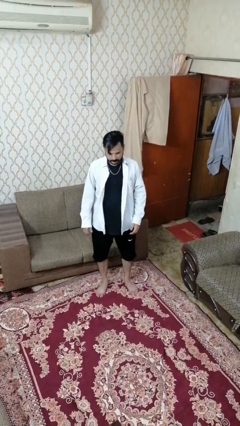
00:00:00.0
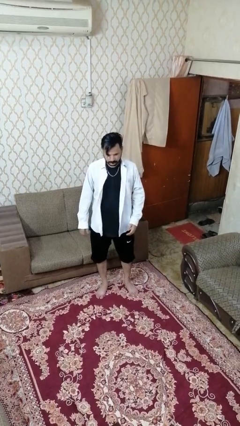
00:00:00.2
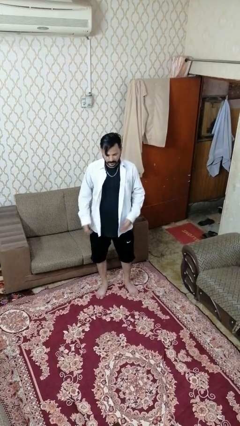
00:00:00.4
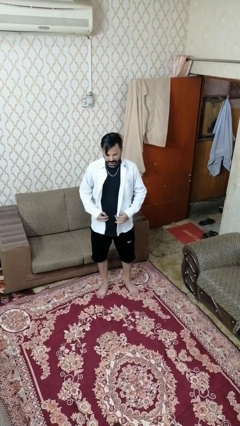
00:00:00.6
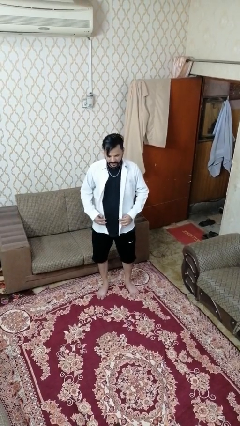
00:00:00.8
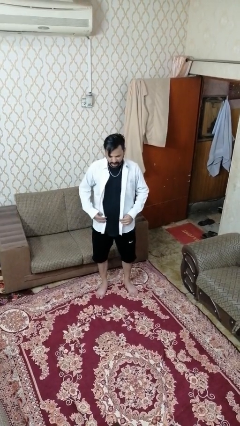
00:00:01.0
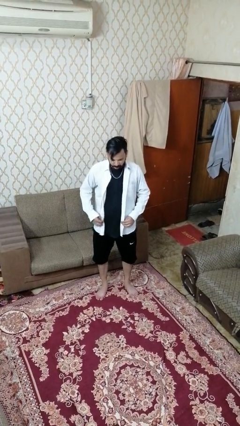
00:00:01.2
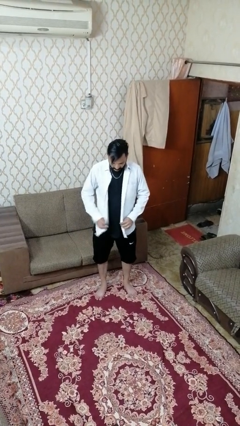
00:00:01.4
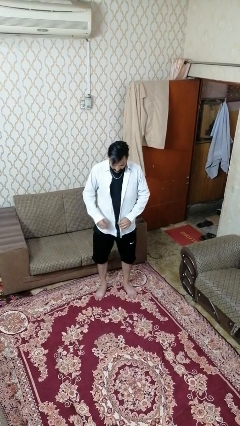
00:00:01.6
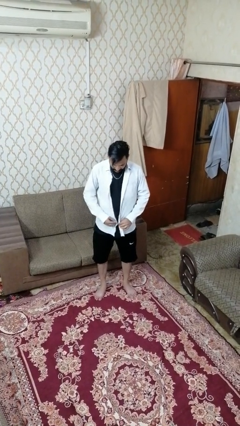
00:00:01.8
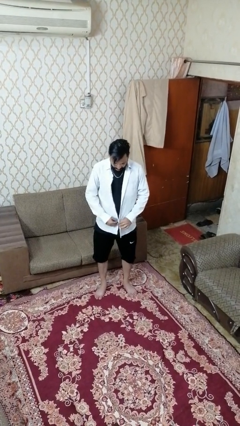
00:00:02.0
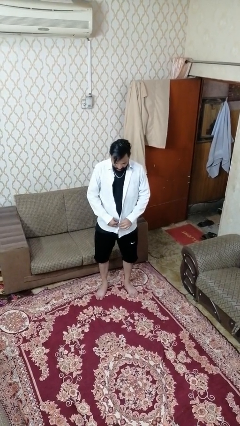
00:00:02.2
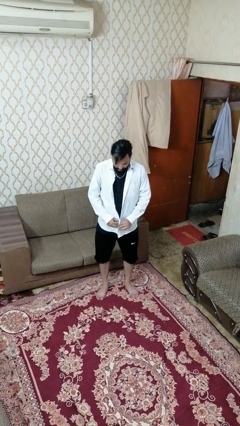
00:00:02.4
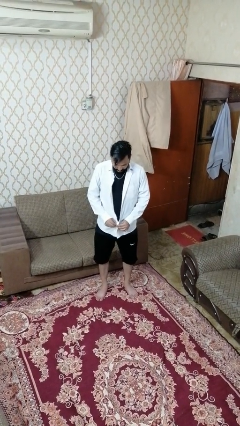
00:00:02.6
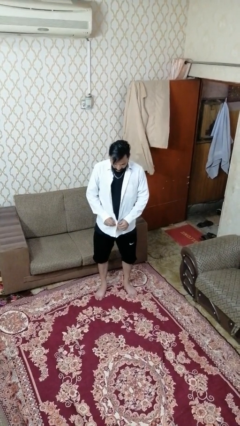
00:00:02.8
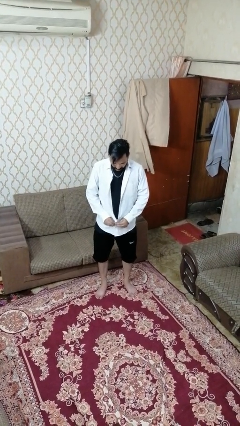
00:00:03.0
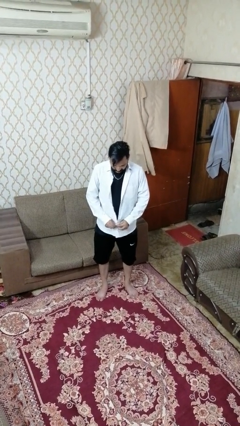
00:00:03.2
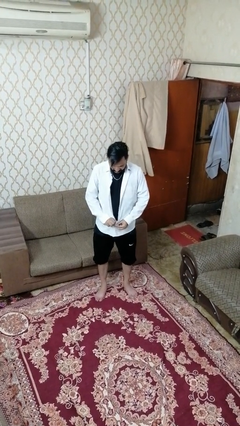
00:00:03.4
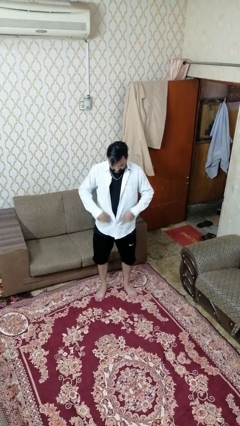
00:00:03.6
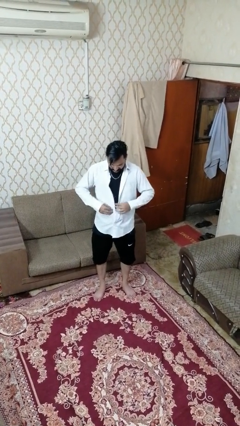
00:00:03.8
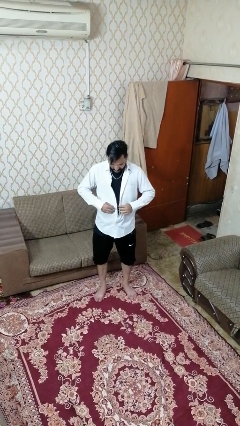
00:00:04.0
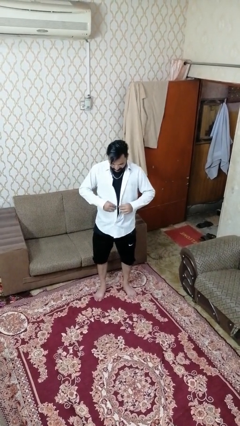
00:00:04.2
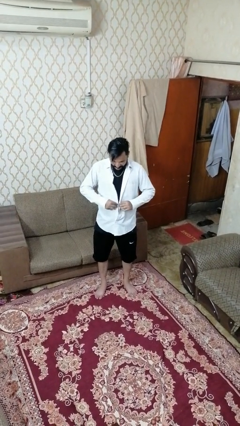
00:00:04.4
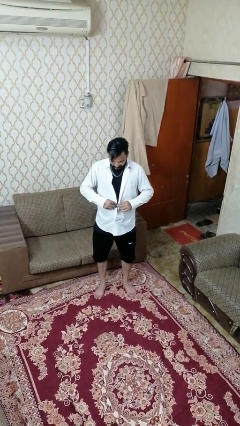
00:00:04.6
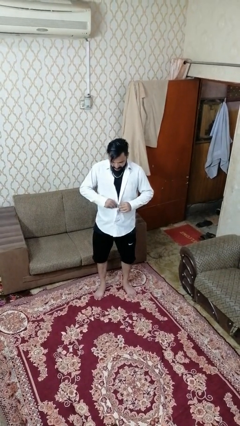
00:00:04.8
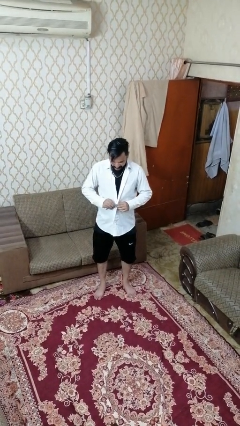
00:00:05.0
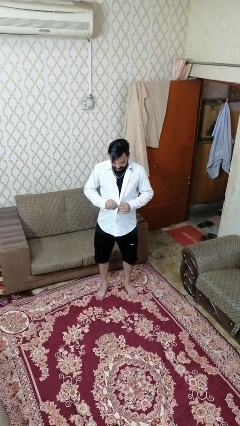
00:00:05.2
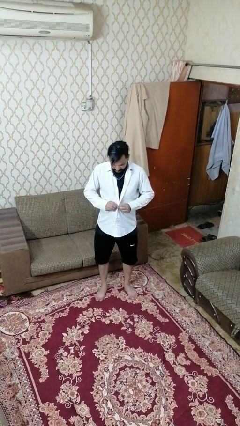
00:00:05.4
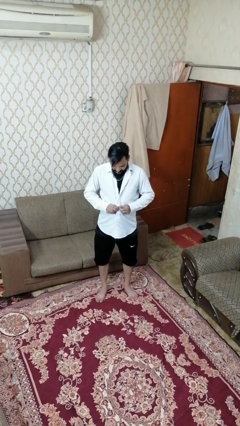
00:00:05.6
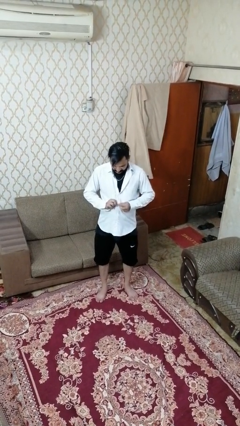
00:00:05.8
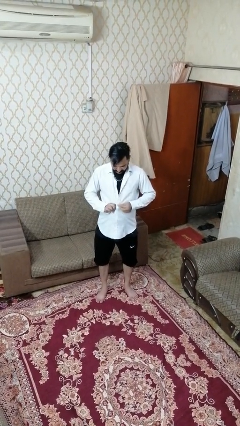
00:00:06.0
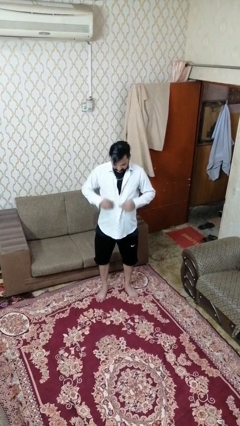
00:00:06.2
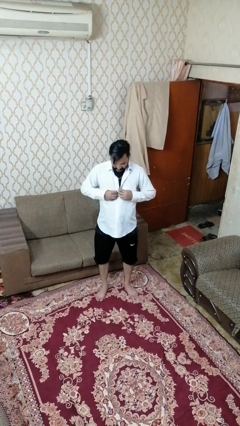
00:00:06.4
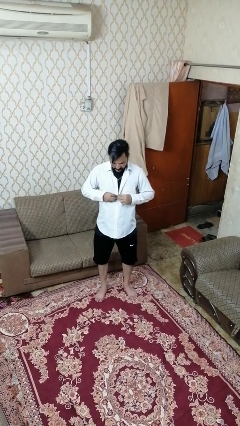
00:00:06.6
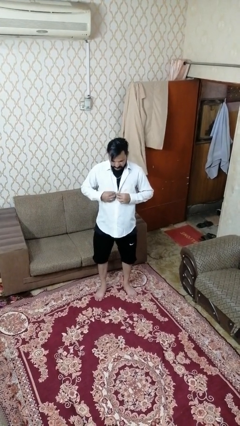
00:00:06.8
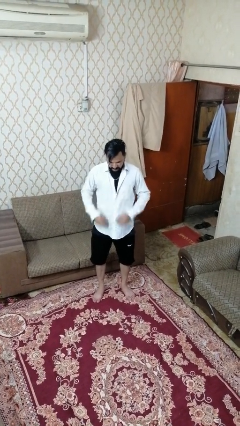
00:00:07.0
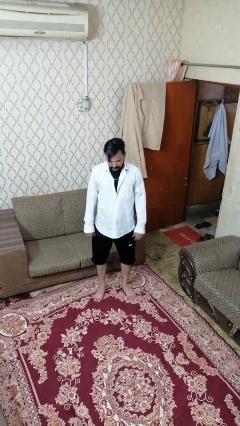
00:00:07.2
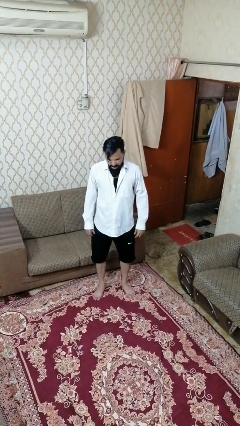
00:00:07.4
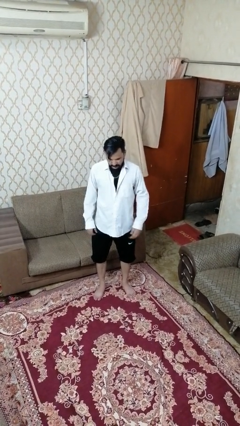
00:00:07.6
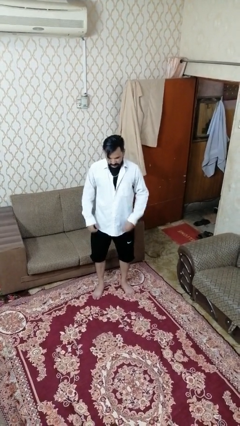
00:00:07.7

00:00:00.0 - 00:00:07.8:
person buttons shirt

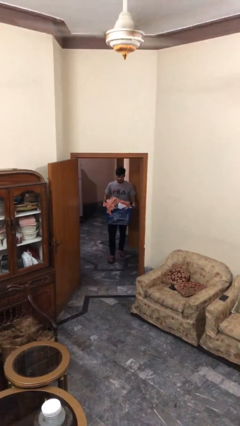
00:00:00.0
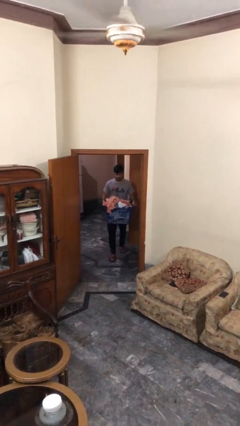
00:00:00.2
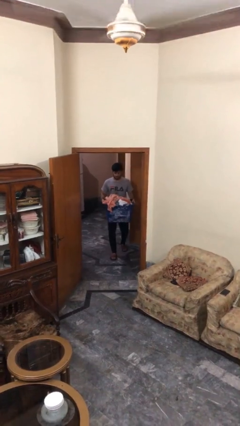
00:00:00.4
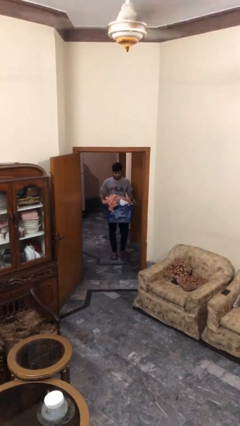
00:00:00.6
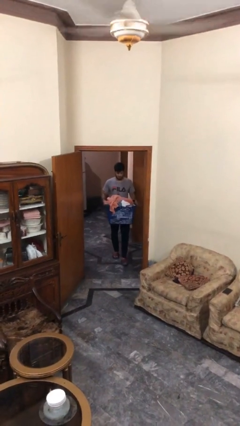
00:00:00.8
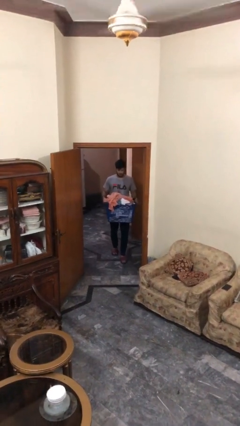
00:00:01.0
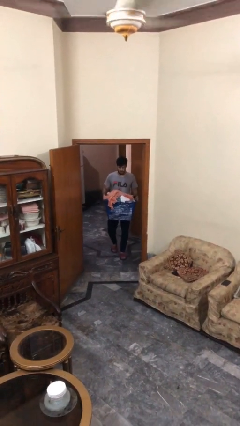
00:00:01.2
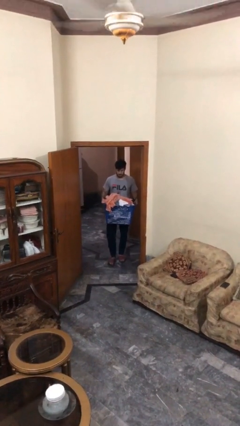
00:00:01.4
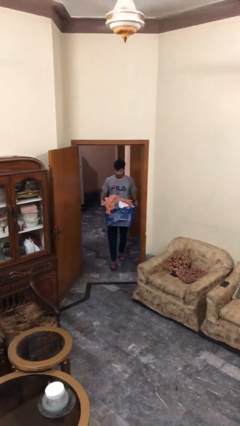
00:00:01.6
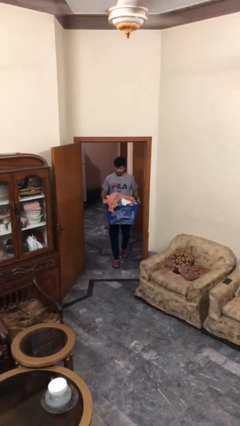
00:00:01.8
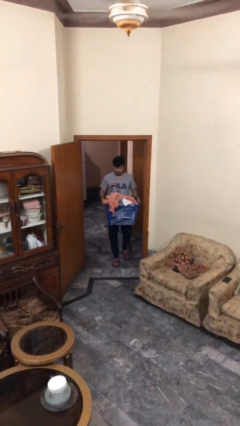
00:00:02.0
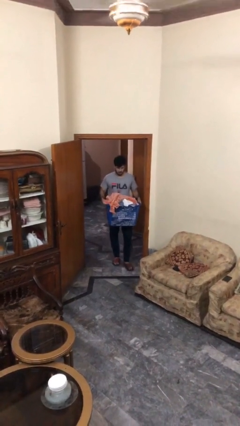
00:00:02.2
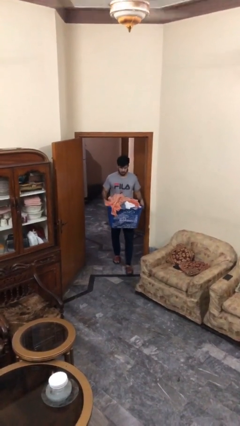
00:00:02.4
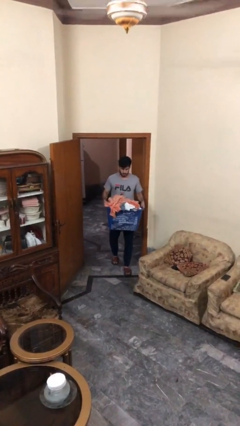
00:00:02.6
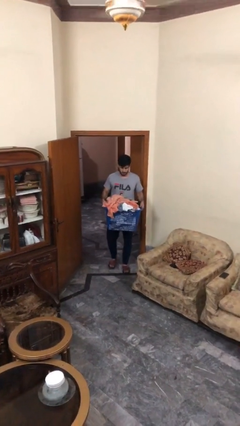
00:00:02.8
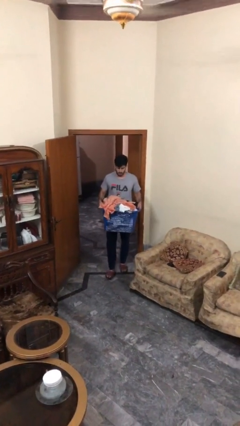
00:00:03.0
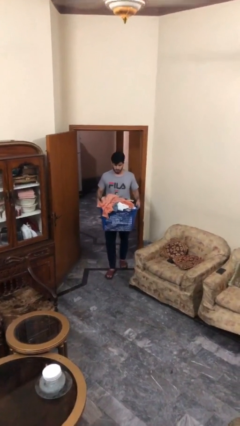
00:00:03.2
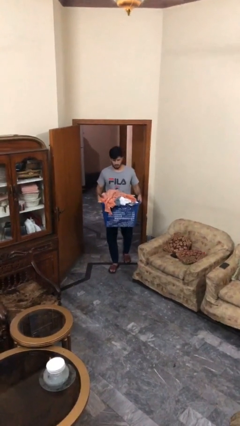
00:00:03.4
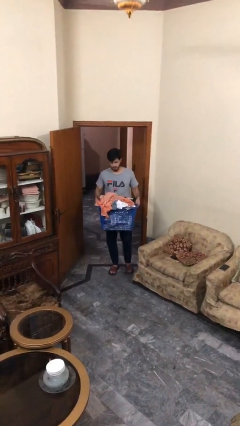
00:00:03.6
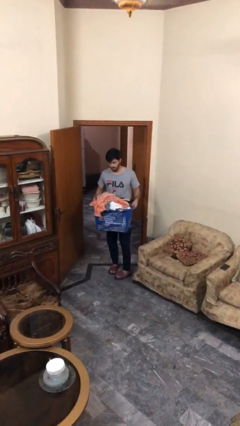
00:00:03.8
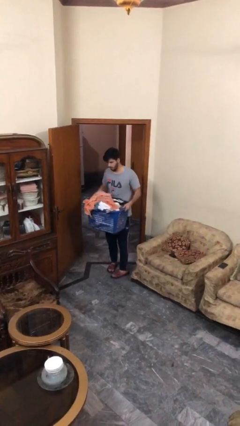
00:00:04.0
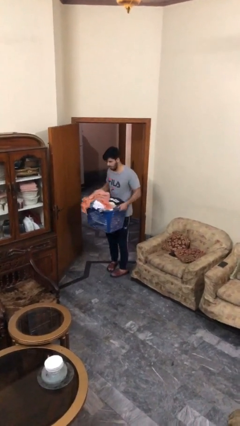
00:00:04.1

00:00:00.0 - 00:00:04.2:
person carries laundry basket

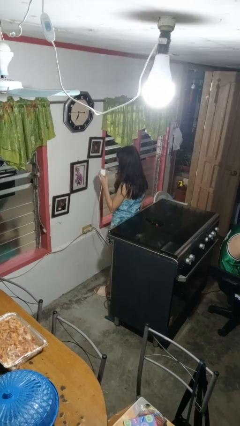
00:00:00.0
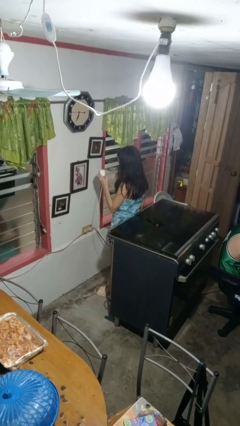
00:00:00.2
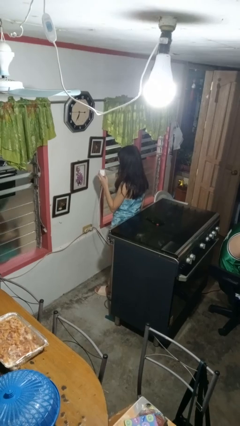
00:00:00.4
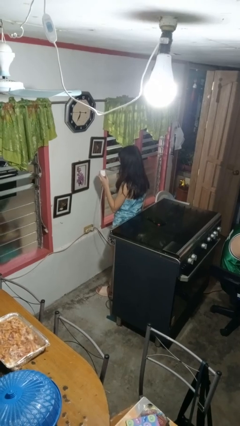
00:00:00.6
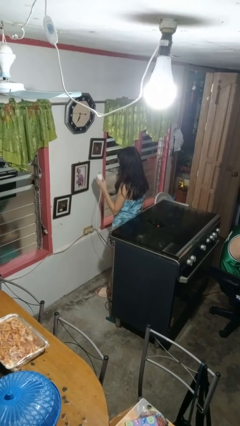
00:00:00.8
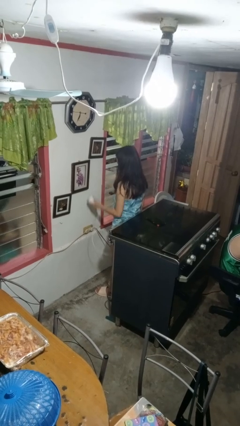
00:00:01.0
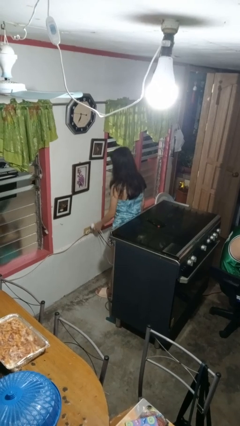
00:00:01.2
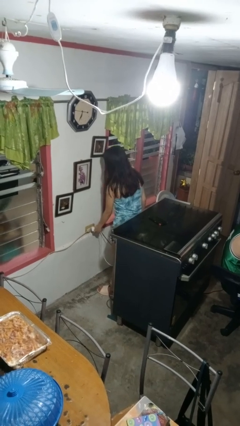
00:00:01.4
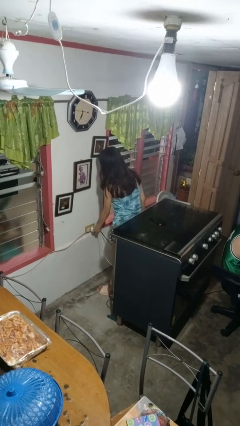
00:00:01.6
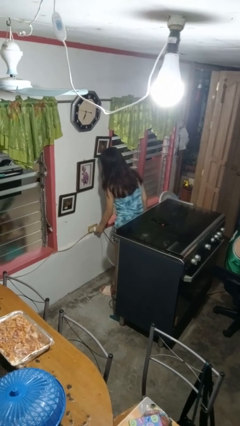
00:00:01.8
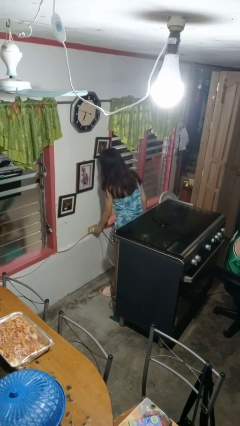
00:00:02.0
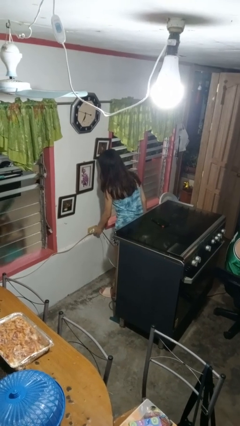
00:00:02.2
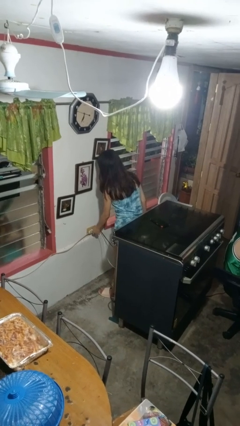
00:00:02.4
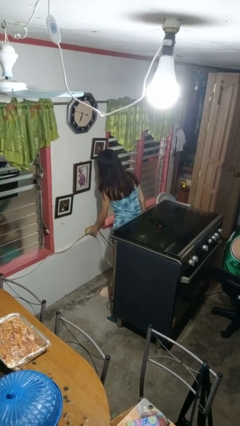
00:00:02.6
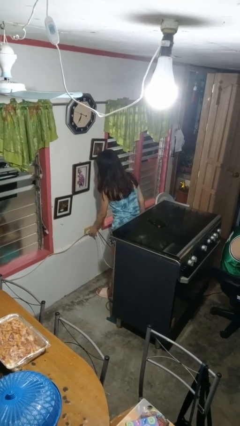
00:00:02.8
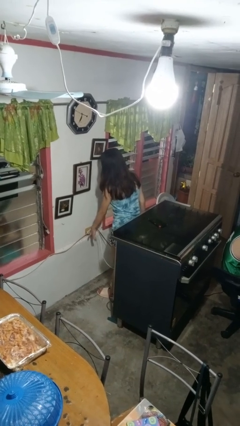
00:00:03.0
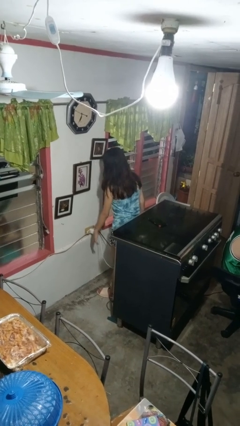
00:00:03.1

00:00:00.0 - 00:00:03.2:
person plugs into electrical socket

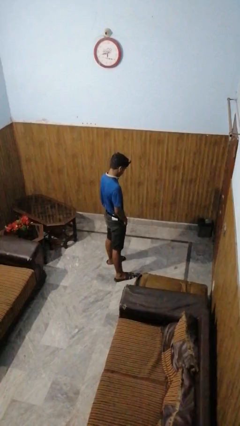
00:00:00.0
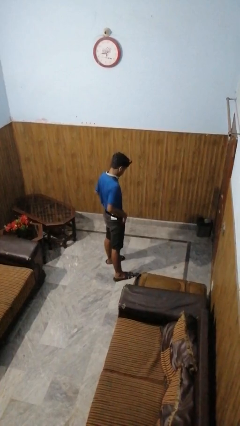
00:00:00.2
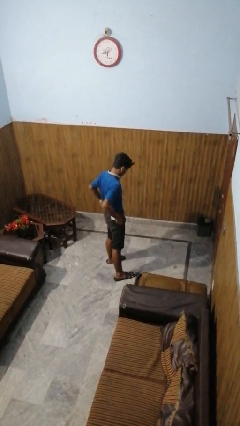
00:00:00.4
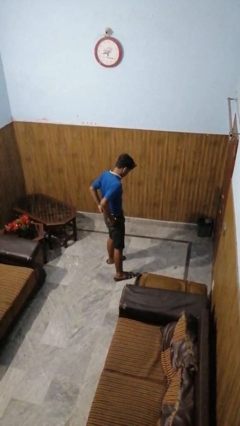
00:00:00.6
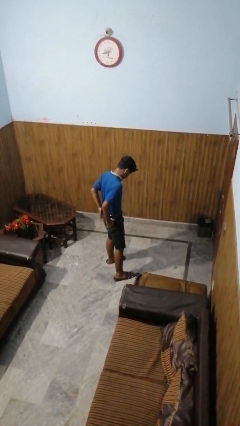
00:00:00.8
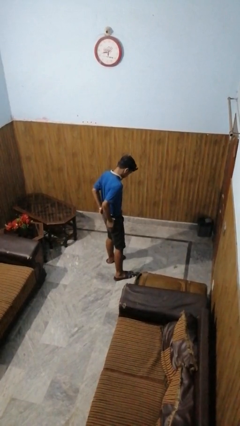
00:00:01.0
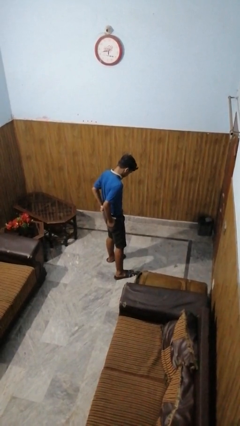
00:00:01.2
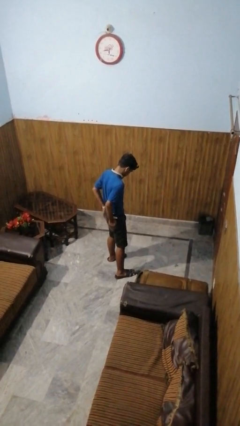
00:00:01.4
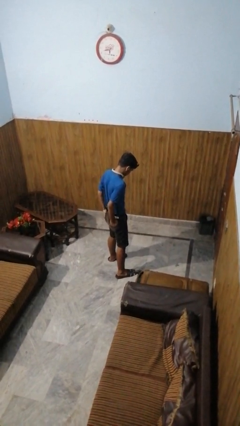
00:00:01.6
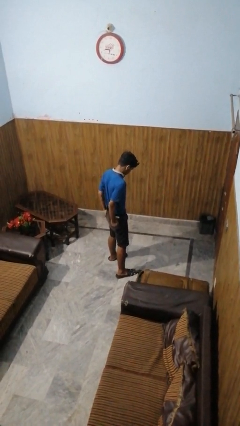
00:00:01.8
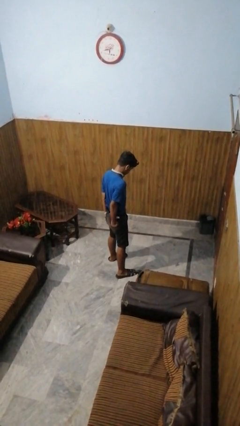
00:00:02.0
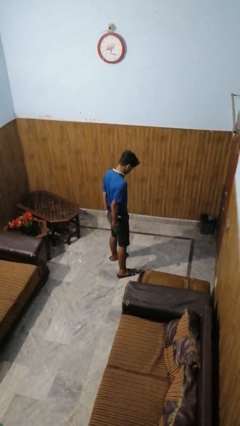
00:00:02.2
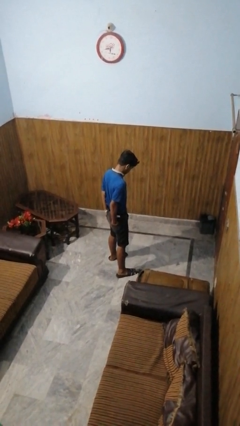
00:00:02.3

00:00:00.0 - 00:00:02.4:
person puts hands in back pockets

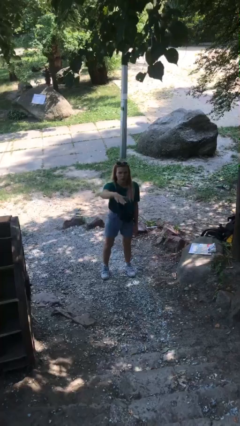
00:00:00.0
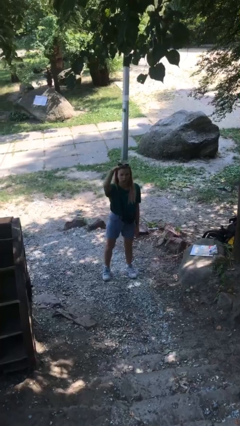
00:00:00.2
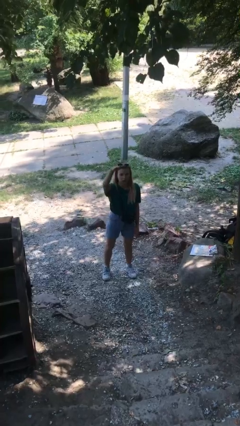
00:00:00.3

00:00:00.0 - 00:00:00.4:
person gestures swipe up
